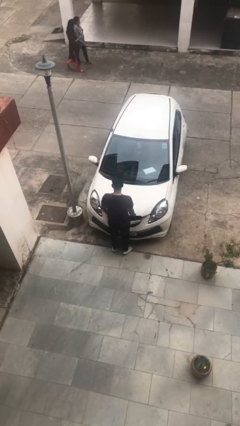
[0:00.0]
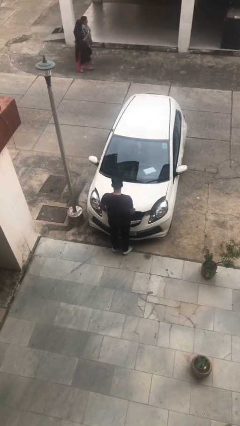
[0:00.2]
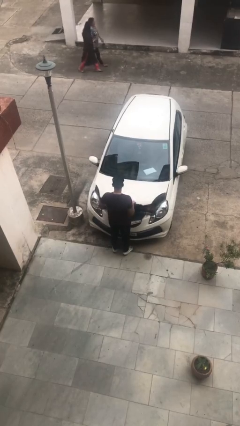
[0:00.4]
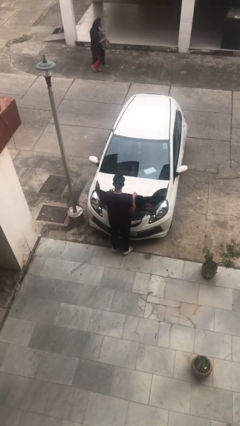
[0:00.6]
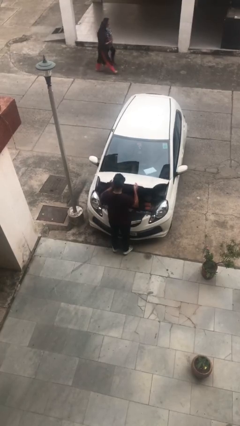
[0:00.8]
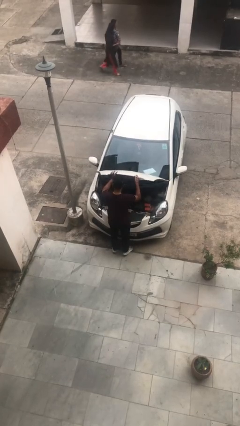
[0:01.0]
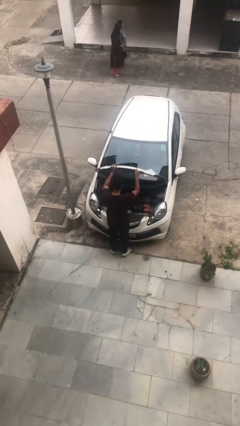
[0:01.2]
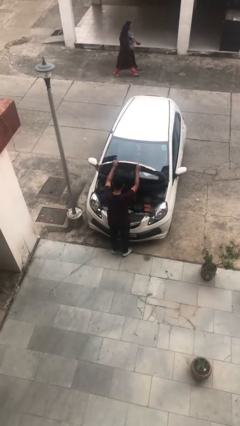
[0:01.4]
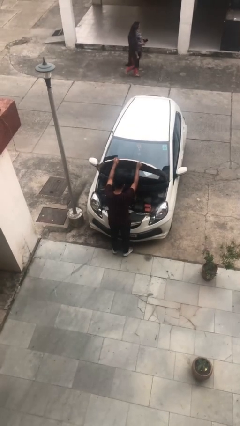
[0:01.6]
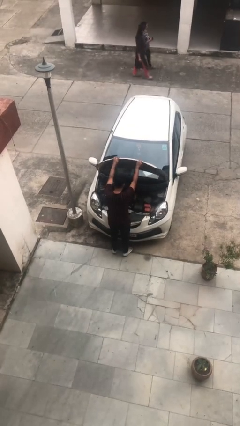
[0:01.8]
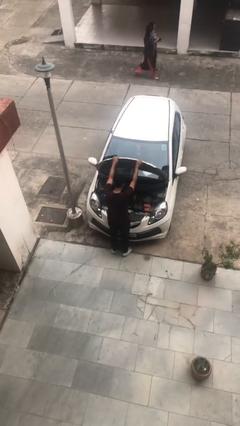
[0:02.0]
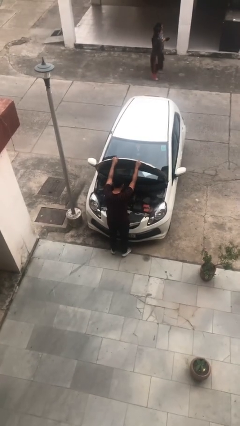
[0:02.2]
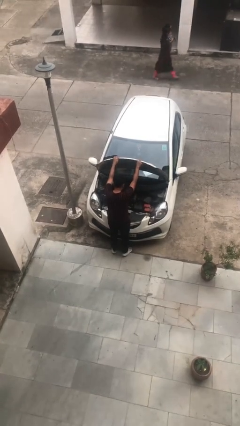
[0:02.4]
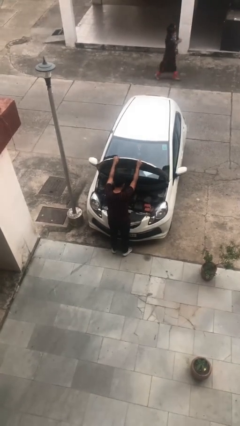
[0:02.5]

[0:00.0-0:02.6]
person opens car hood

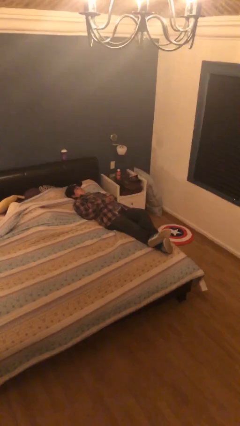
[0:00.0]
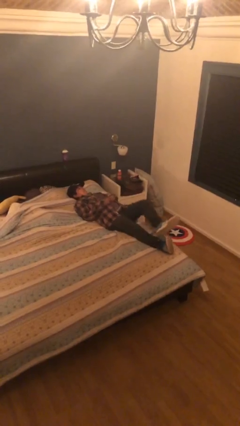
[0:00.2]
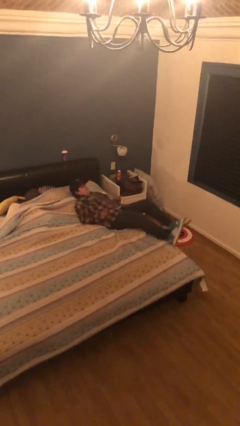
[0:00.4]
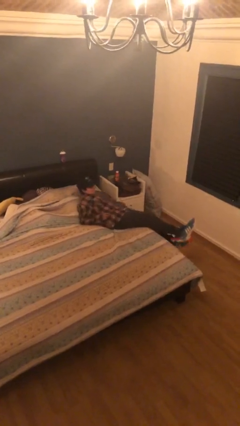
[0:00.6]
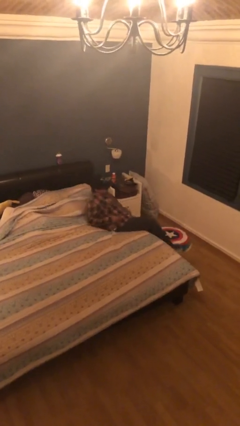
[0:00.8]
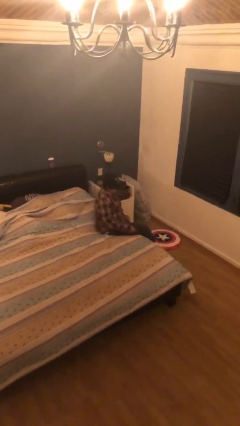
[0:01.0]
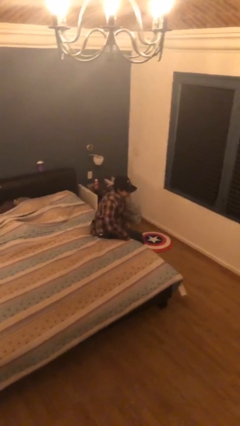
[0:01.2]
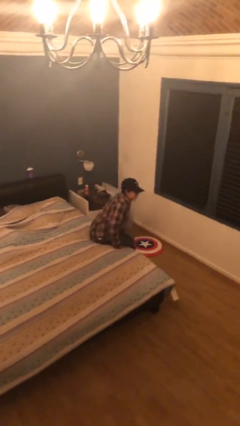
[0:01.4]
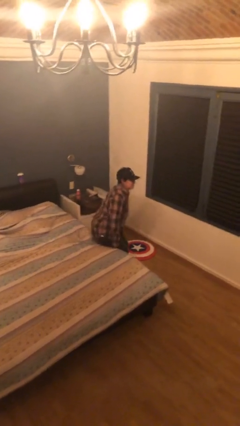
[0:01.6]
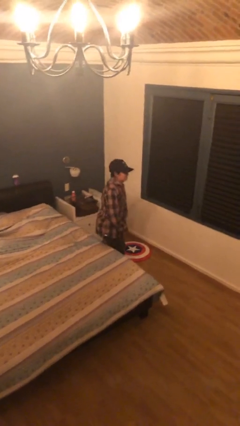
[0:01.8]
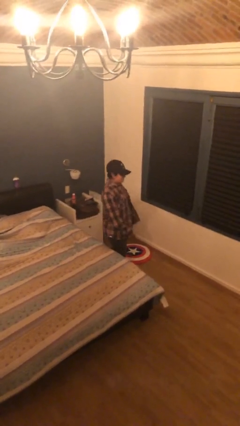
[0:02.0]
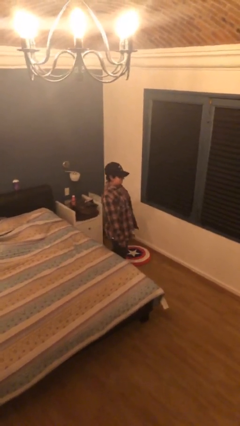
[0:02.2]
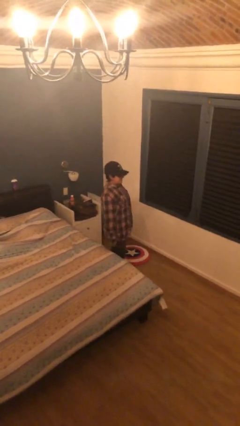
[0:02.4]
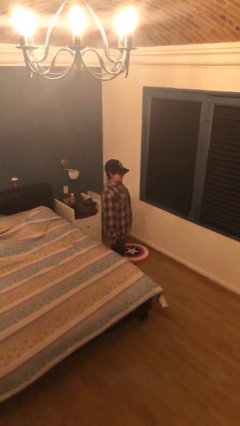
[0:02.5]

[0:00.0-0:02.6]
person stands up

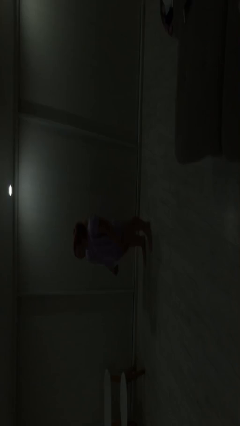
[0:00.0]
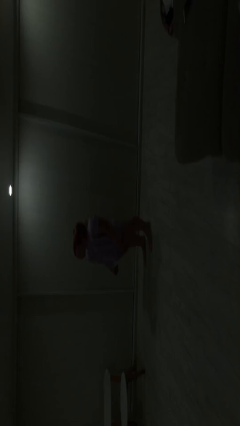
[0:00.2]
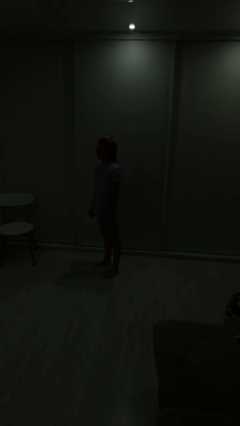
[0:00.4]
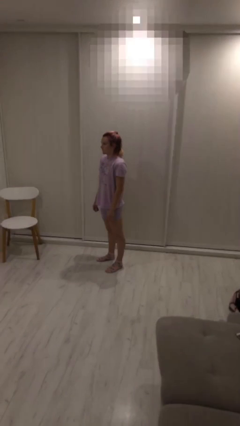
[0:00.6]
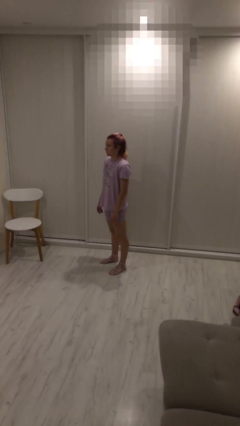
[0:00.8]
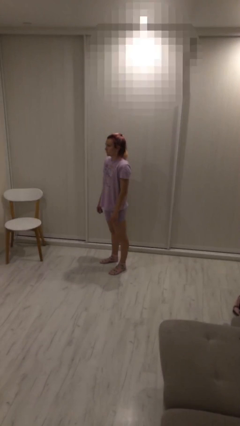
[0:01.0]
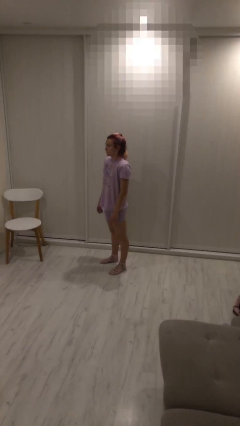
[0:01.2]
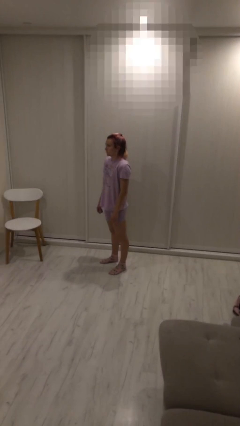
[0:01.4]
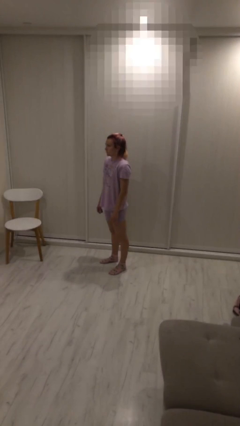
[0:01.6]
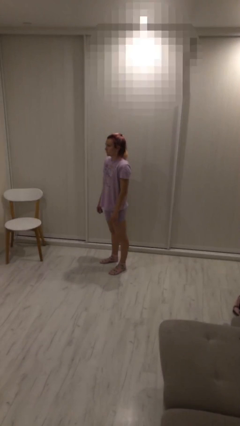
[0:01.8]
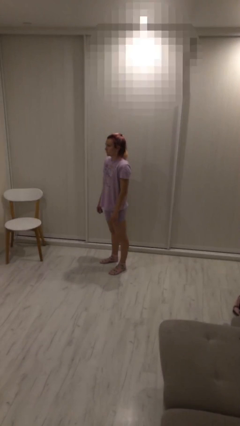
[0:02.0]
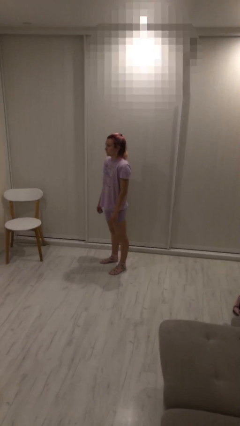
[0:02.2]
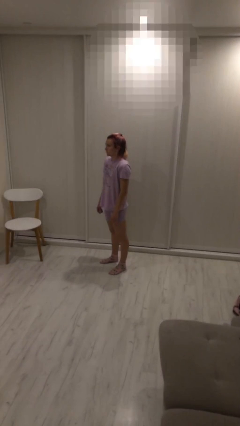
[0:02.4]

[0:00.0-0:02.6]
person squats

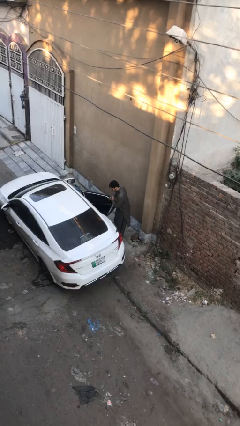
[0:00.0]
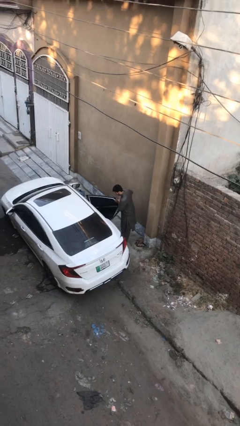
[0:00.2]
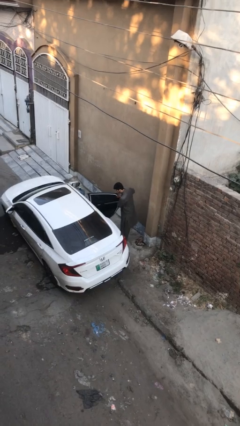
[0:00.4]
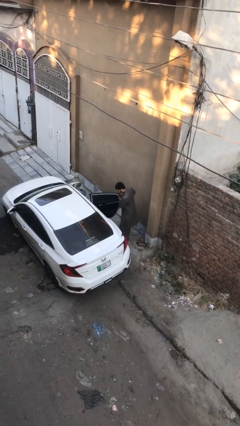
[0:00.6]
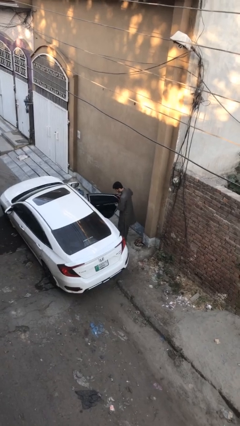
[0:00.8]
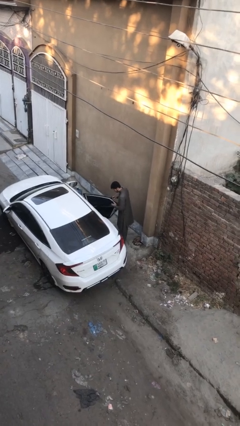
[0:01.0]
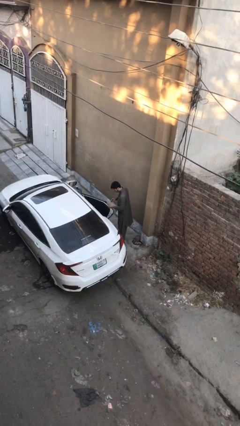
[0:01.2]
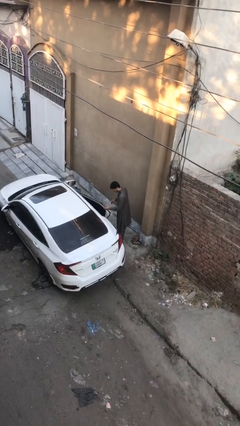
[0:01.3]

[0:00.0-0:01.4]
person opens car door

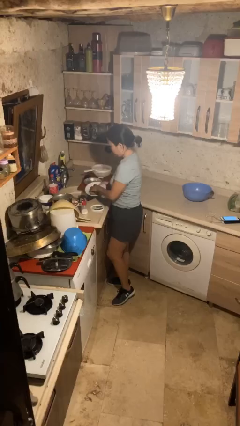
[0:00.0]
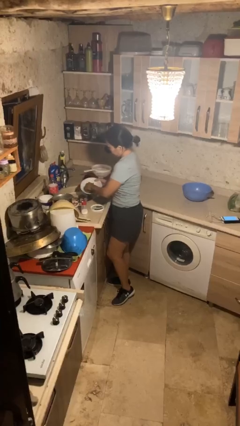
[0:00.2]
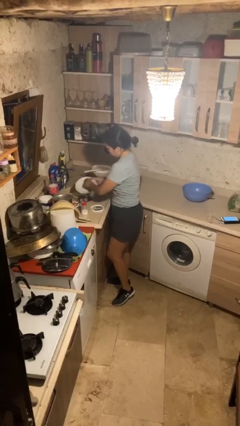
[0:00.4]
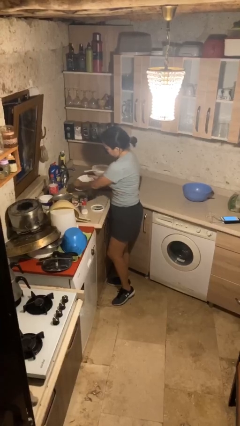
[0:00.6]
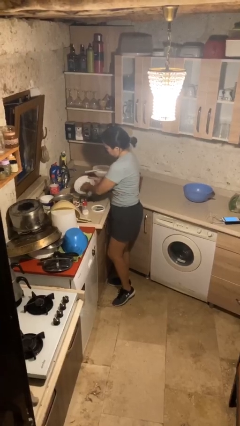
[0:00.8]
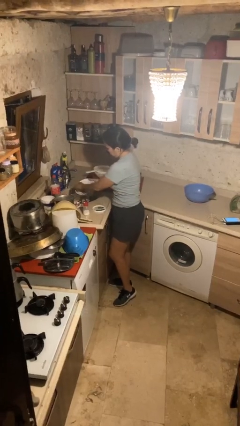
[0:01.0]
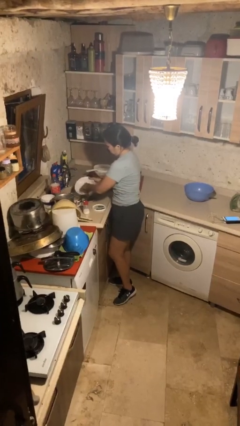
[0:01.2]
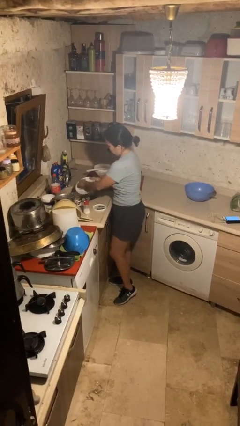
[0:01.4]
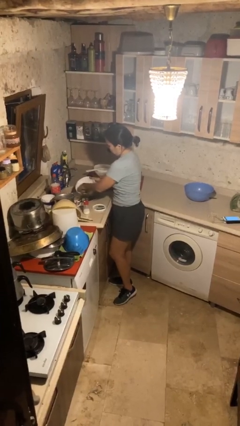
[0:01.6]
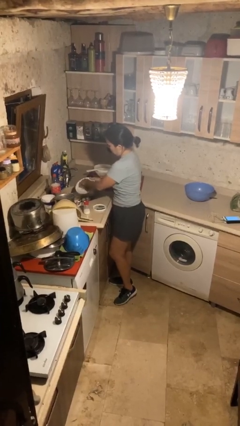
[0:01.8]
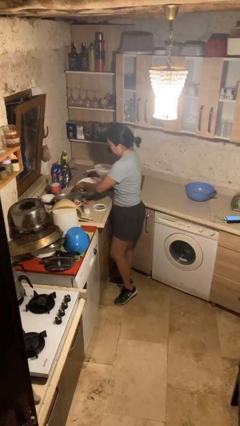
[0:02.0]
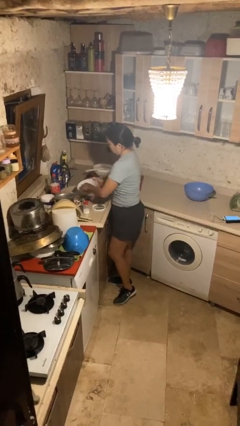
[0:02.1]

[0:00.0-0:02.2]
person washes dish

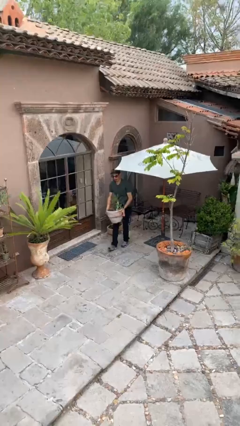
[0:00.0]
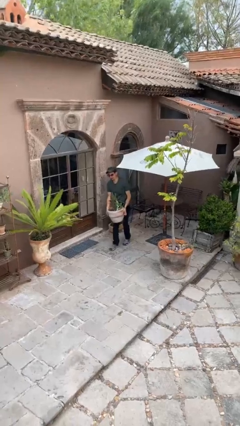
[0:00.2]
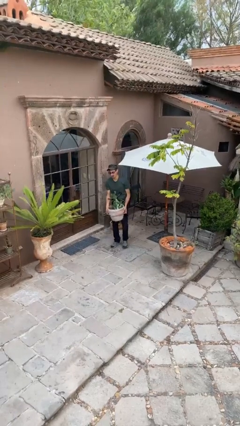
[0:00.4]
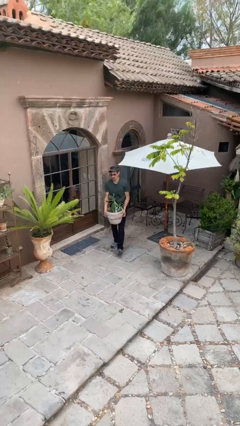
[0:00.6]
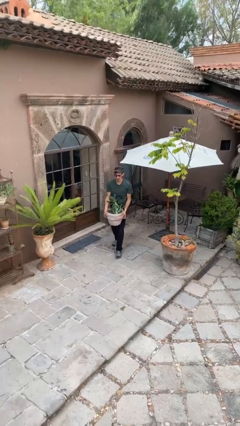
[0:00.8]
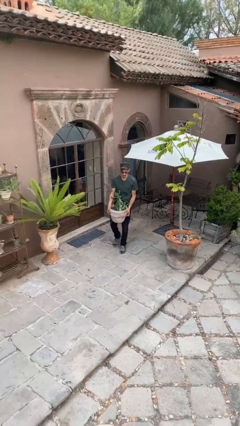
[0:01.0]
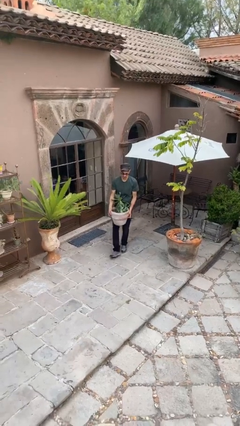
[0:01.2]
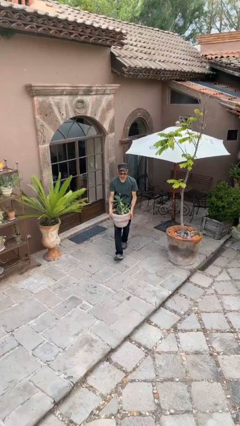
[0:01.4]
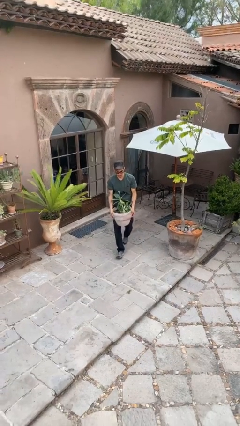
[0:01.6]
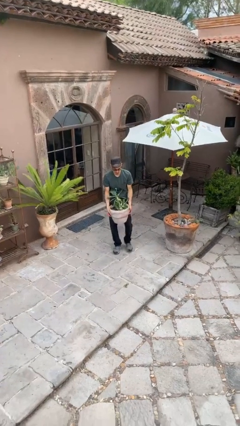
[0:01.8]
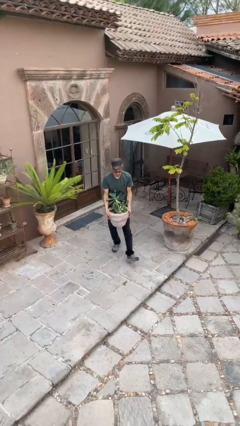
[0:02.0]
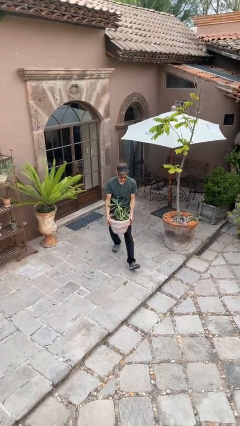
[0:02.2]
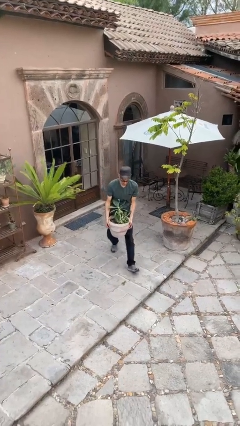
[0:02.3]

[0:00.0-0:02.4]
person carries heavy object

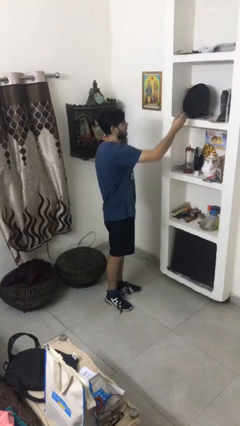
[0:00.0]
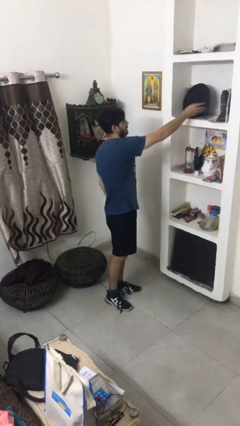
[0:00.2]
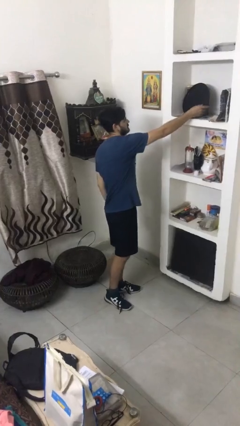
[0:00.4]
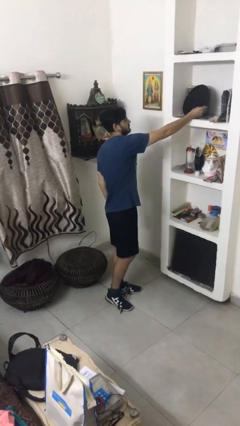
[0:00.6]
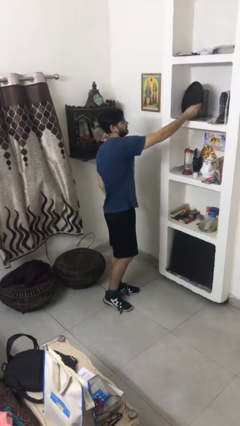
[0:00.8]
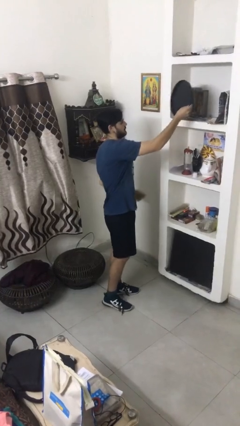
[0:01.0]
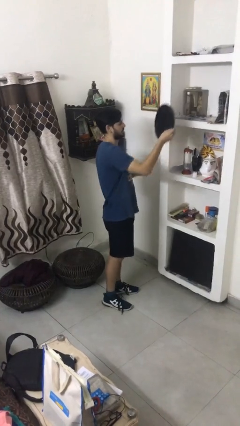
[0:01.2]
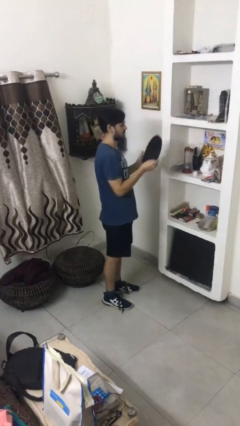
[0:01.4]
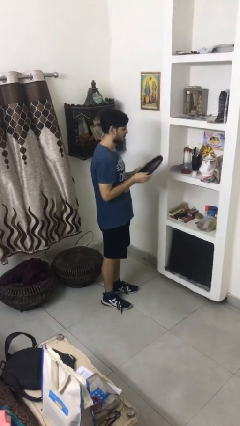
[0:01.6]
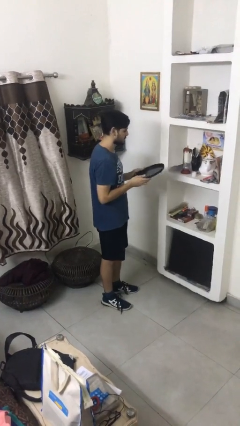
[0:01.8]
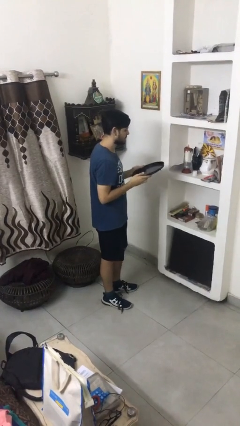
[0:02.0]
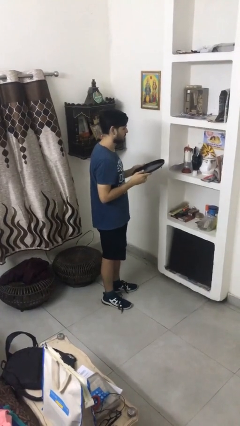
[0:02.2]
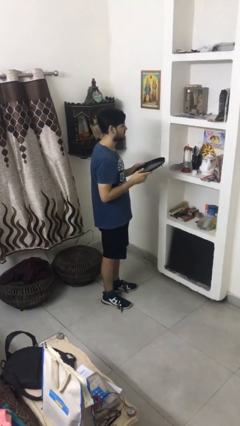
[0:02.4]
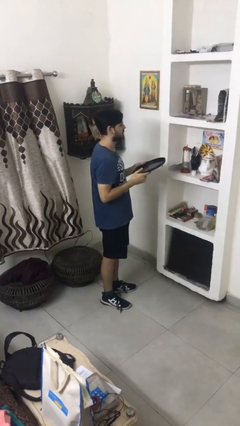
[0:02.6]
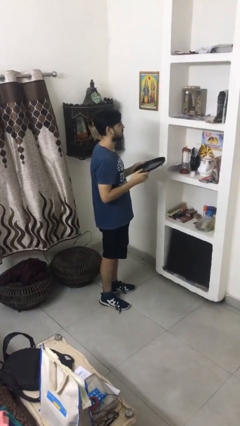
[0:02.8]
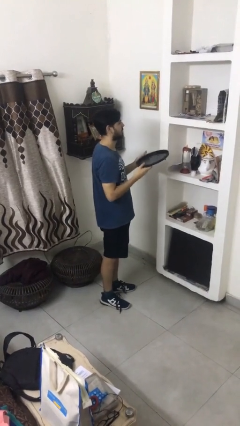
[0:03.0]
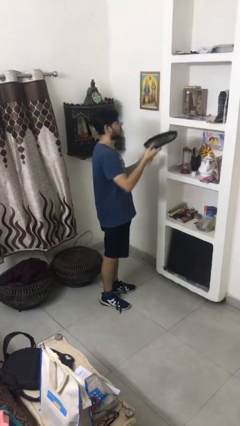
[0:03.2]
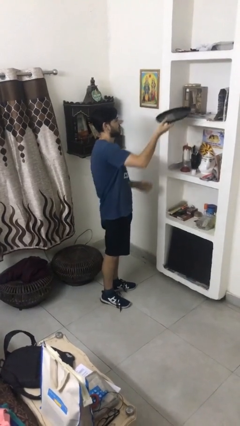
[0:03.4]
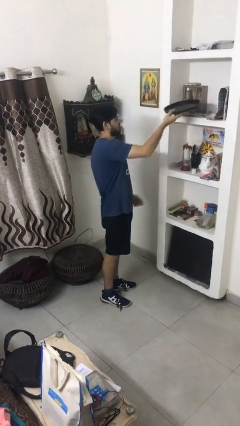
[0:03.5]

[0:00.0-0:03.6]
person picks up object from shelf

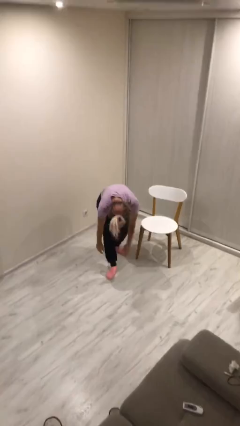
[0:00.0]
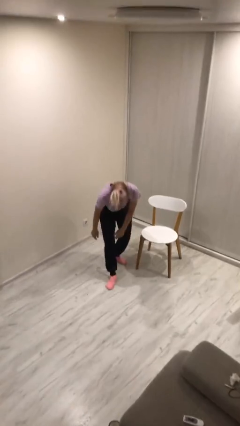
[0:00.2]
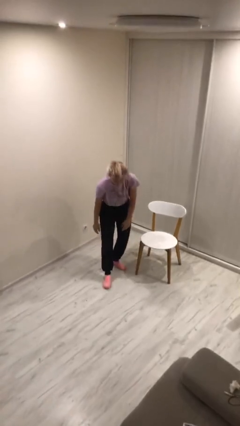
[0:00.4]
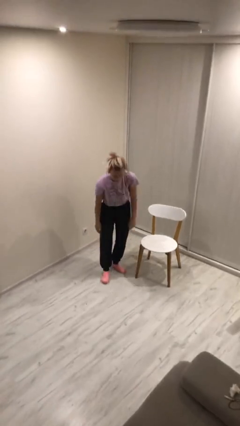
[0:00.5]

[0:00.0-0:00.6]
person stands up from floor
